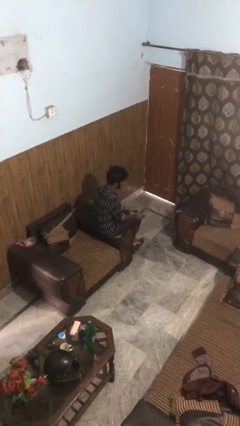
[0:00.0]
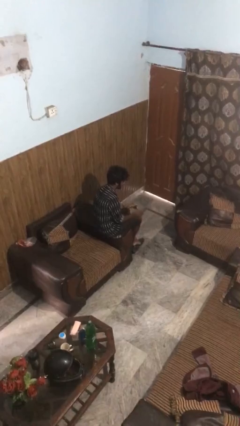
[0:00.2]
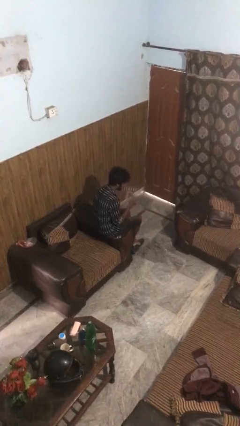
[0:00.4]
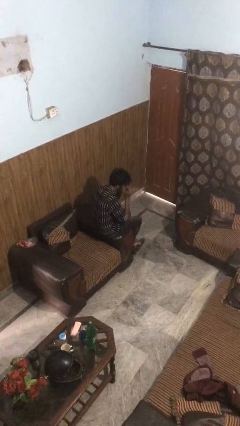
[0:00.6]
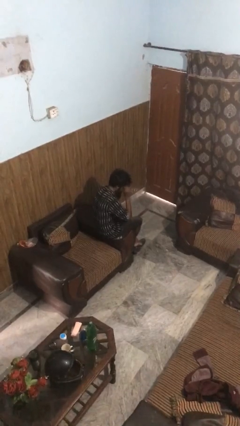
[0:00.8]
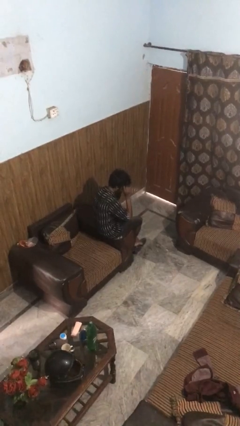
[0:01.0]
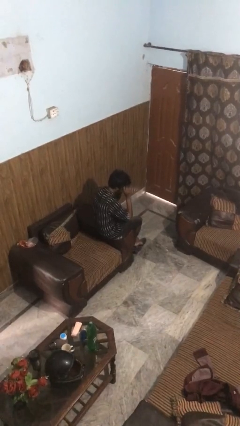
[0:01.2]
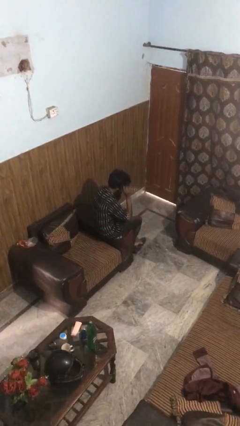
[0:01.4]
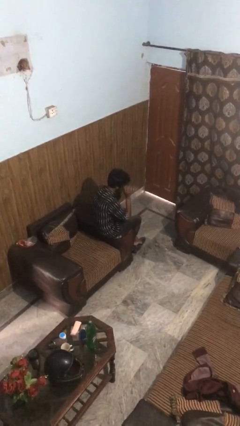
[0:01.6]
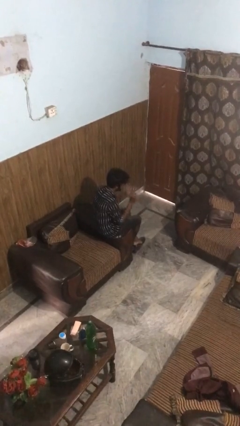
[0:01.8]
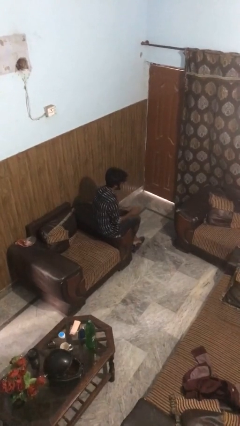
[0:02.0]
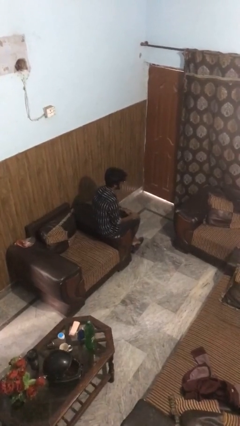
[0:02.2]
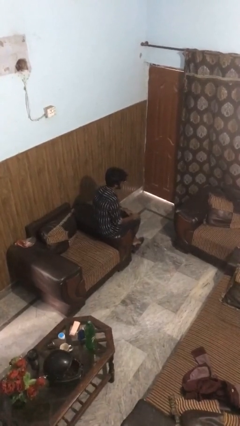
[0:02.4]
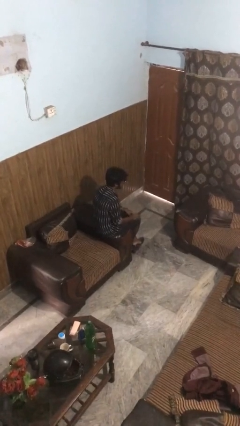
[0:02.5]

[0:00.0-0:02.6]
person puts on sunglasses

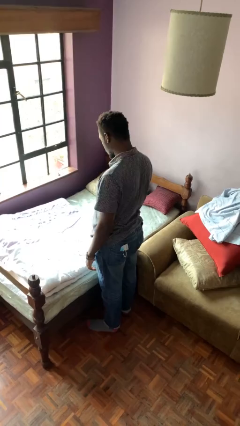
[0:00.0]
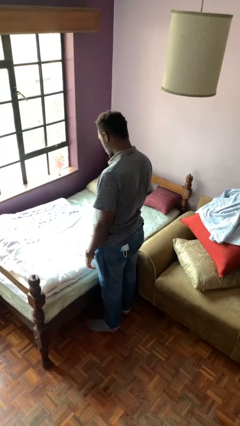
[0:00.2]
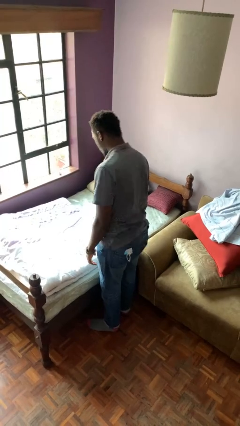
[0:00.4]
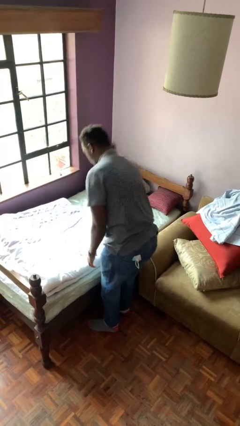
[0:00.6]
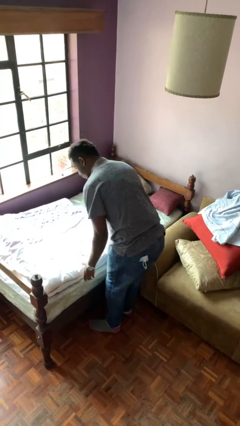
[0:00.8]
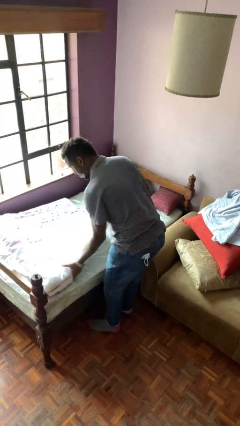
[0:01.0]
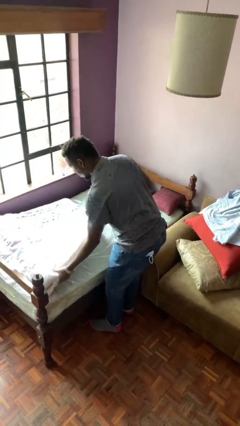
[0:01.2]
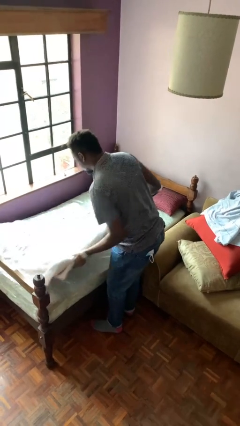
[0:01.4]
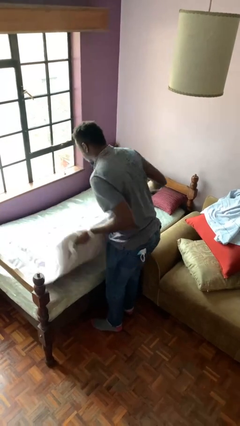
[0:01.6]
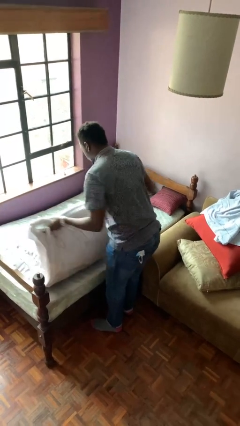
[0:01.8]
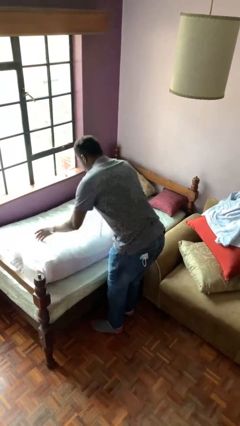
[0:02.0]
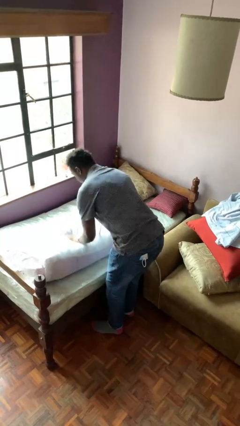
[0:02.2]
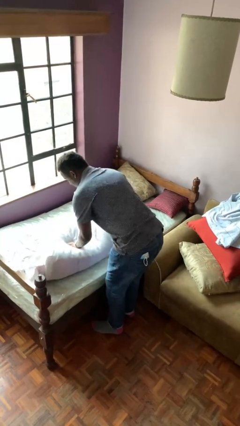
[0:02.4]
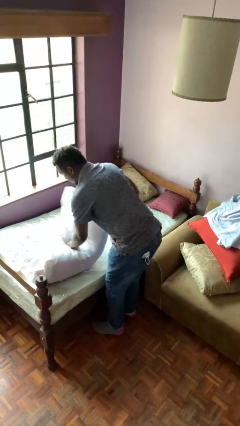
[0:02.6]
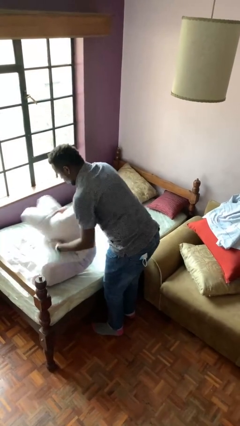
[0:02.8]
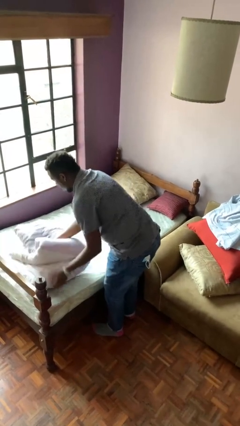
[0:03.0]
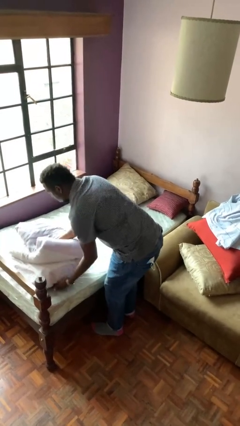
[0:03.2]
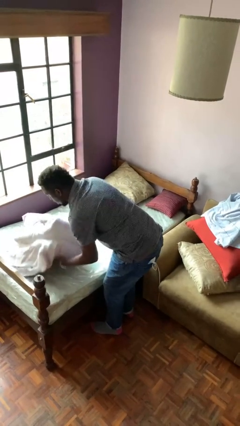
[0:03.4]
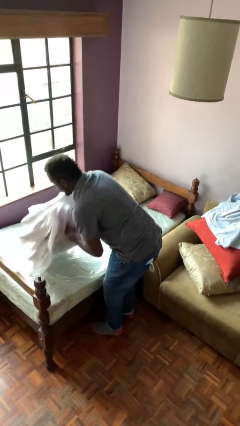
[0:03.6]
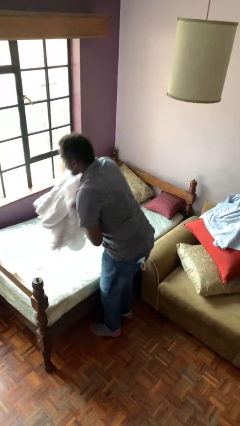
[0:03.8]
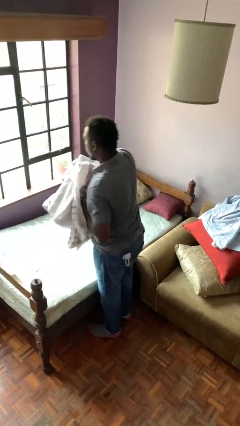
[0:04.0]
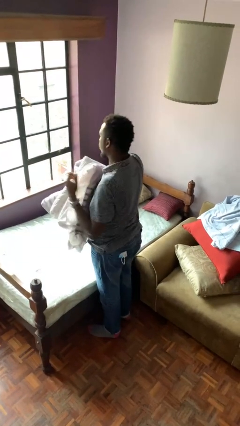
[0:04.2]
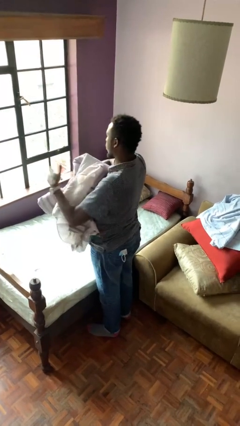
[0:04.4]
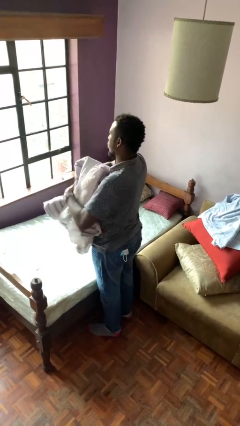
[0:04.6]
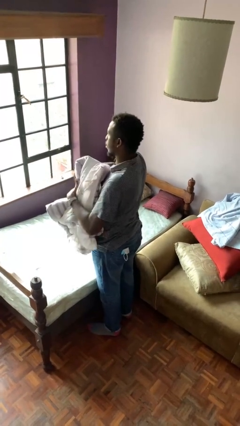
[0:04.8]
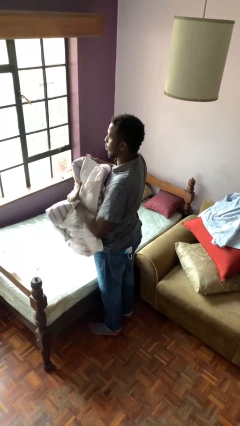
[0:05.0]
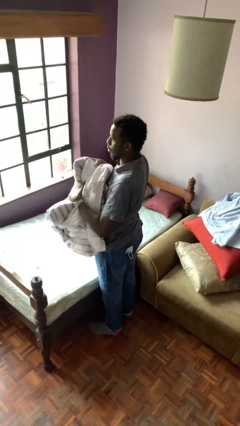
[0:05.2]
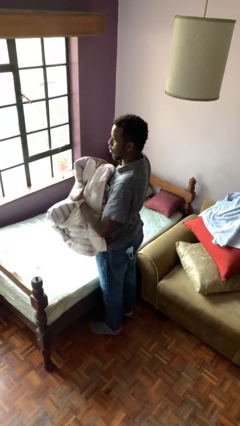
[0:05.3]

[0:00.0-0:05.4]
person folds blanket

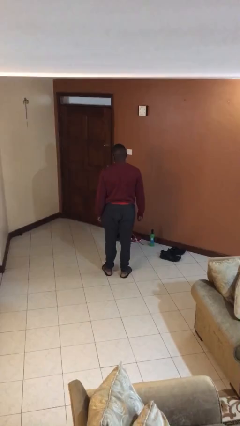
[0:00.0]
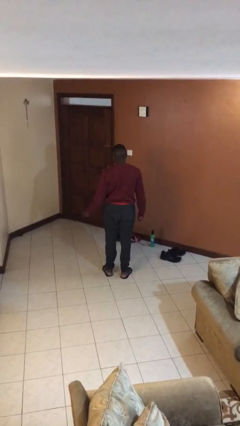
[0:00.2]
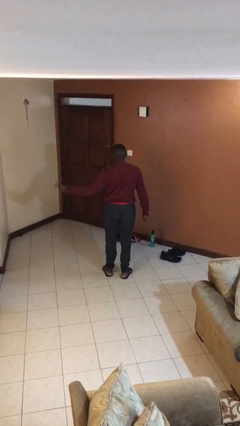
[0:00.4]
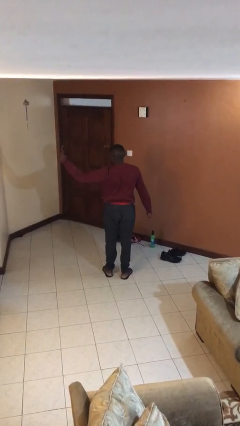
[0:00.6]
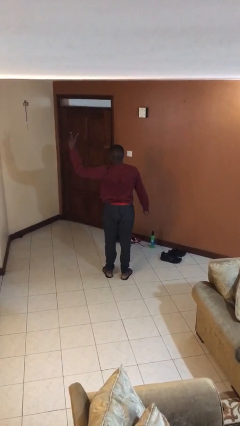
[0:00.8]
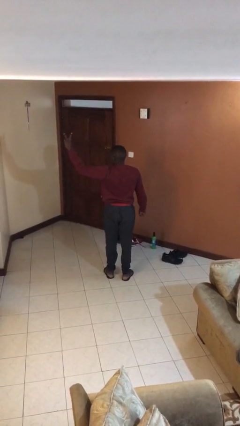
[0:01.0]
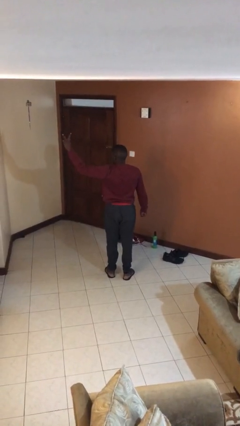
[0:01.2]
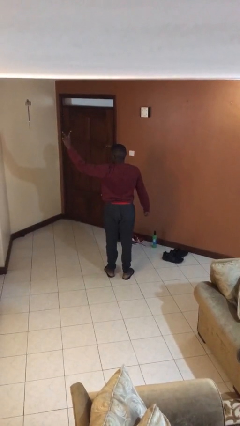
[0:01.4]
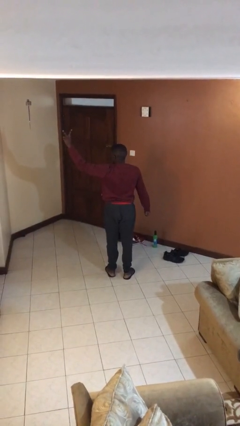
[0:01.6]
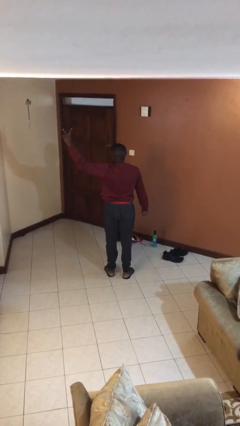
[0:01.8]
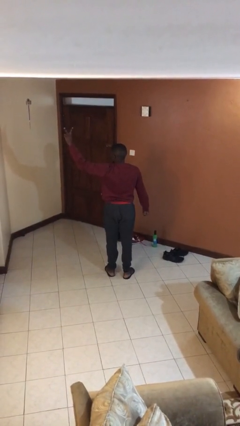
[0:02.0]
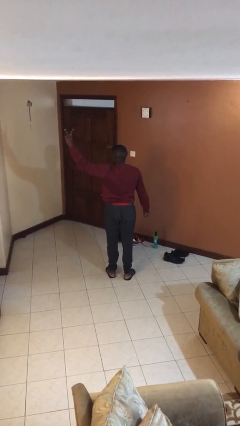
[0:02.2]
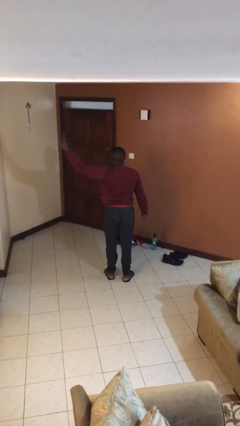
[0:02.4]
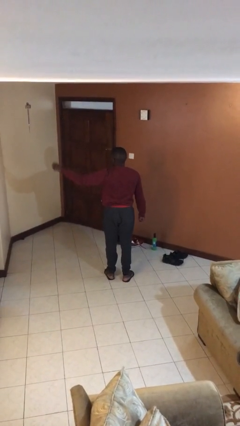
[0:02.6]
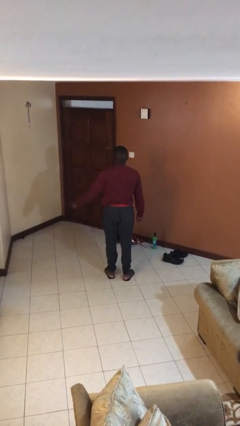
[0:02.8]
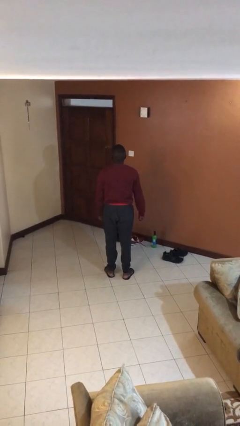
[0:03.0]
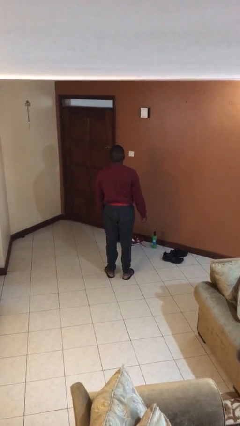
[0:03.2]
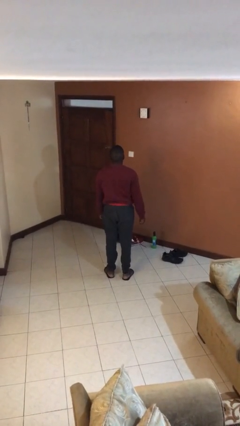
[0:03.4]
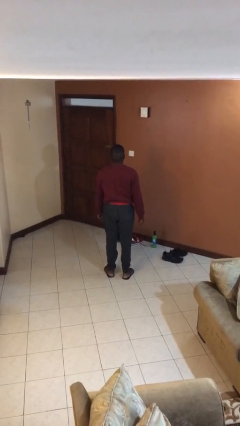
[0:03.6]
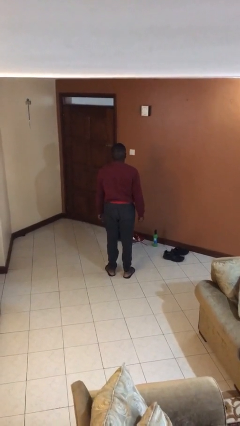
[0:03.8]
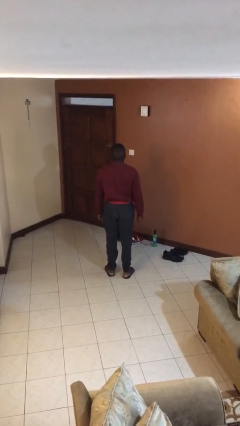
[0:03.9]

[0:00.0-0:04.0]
person gestures peace

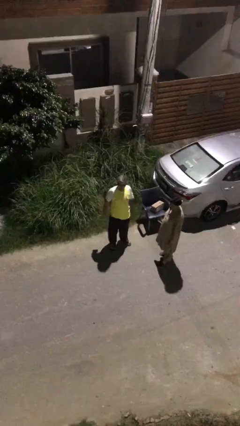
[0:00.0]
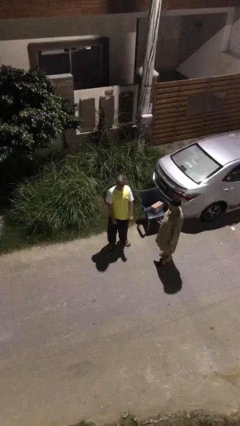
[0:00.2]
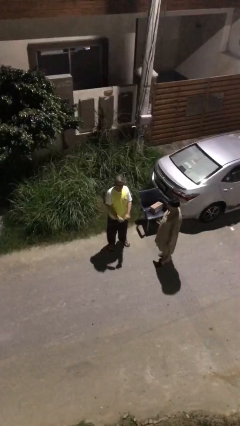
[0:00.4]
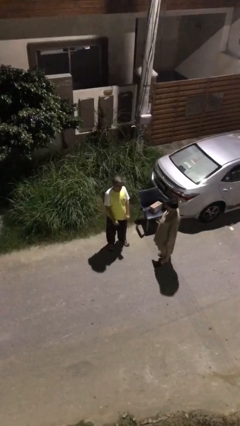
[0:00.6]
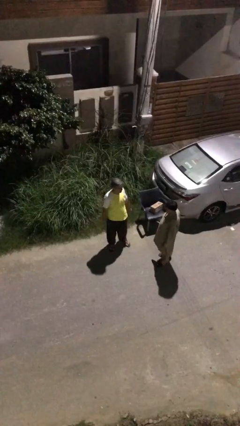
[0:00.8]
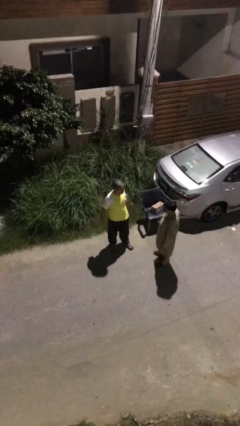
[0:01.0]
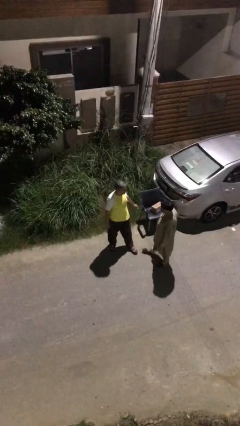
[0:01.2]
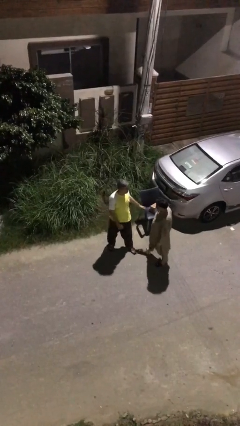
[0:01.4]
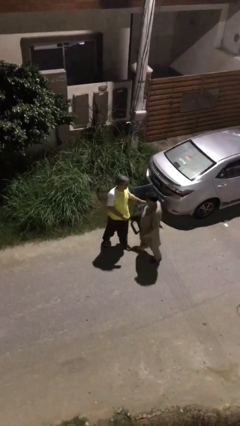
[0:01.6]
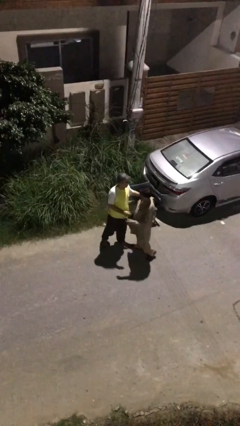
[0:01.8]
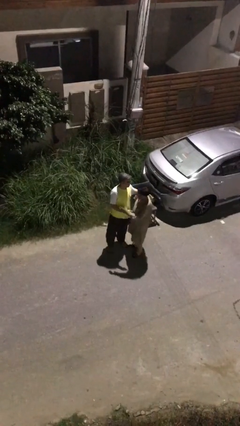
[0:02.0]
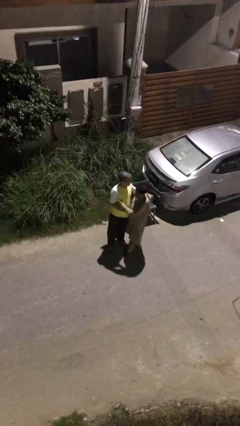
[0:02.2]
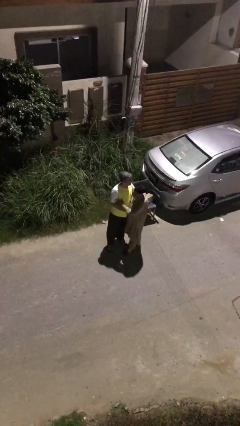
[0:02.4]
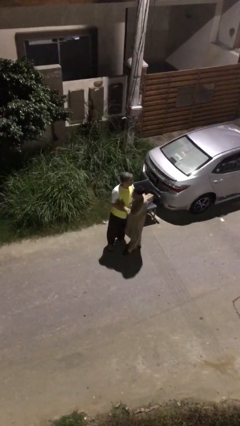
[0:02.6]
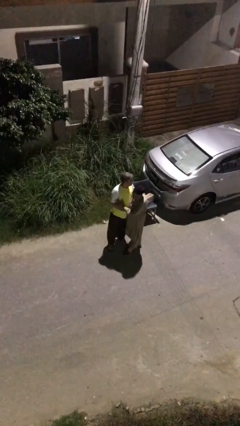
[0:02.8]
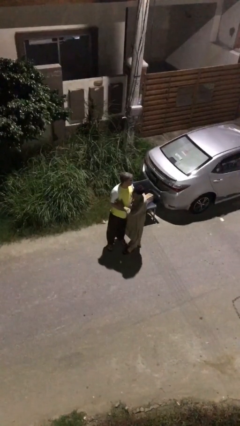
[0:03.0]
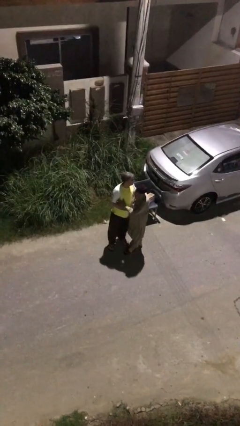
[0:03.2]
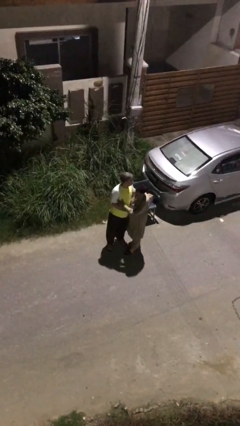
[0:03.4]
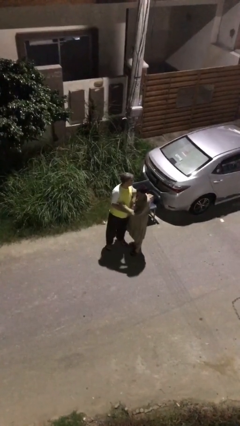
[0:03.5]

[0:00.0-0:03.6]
person embraces person

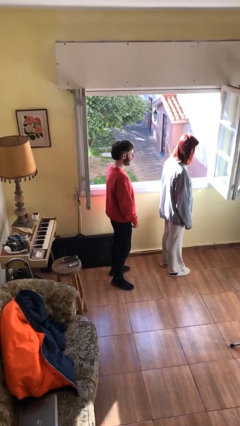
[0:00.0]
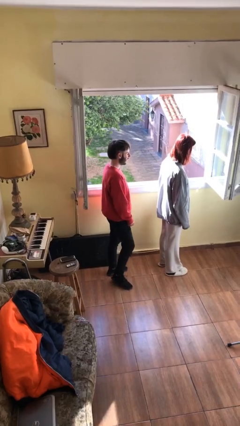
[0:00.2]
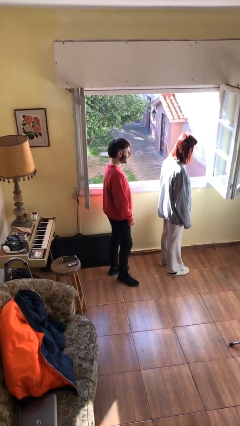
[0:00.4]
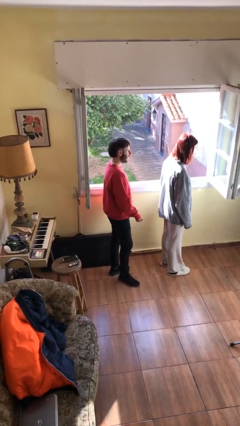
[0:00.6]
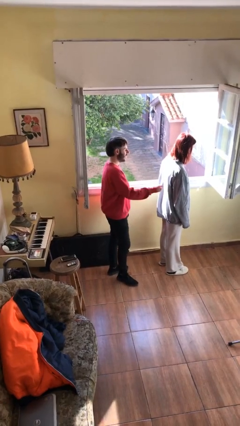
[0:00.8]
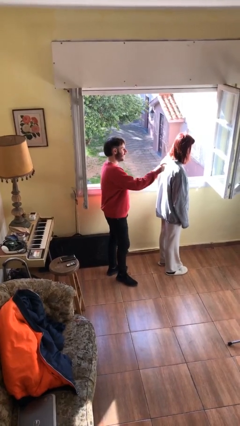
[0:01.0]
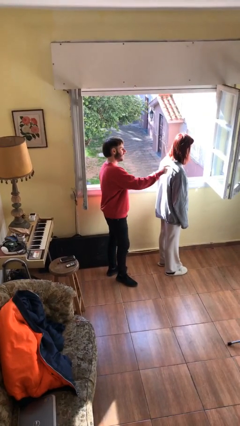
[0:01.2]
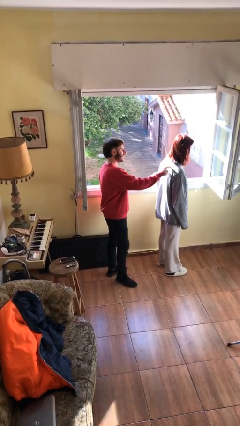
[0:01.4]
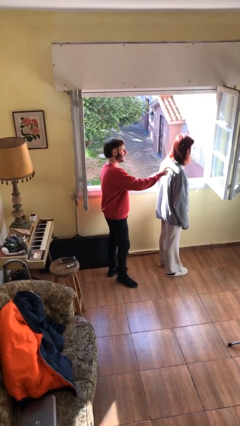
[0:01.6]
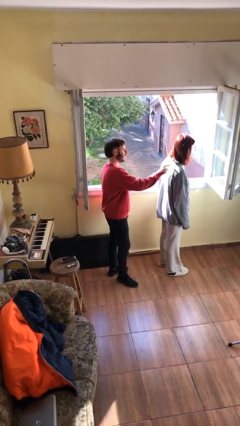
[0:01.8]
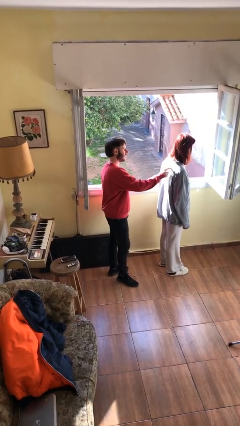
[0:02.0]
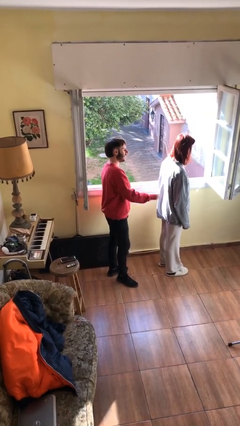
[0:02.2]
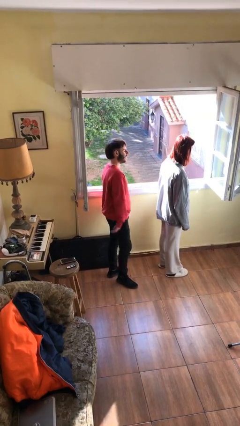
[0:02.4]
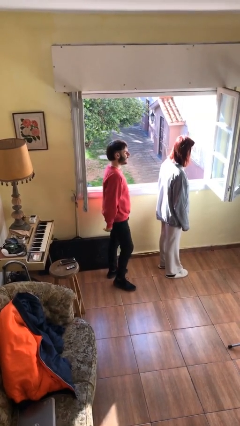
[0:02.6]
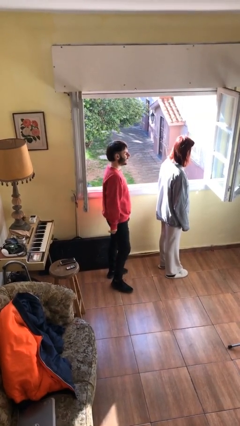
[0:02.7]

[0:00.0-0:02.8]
person touches back of person
